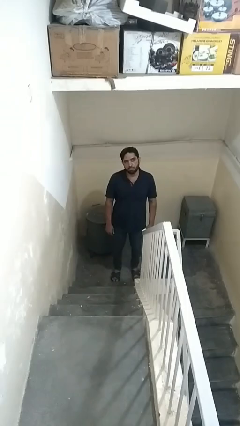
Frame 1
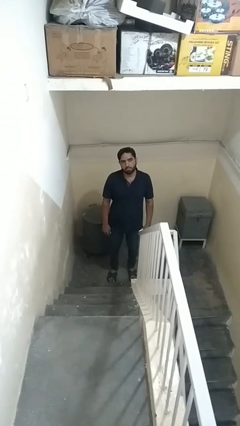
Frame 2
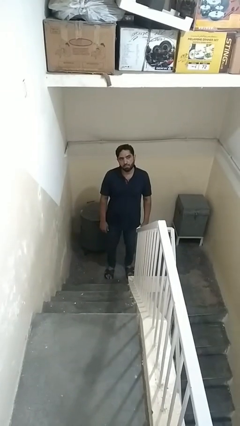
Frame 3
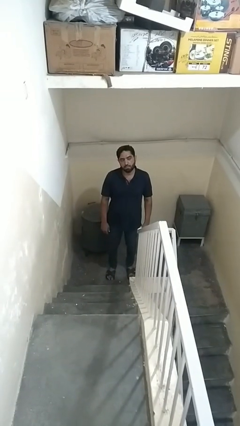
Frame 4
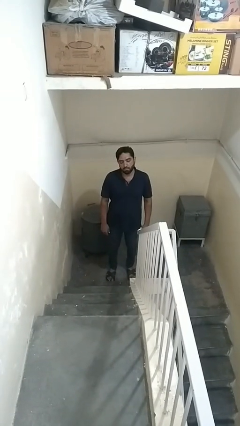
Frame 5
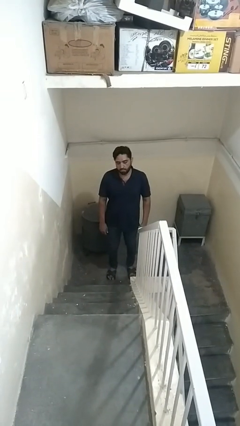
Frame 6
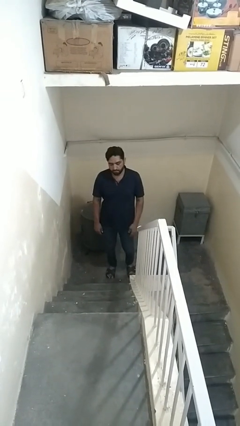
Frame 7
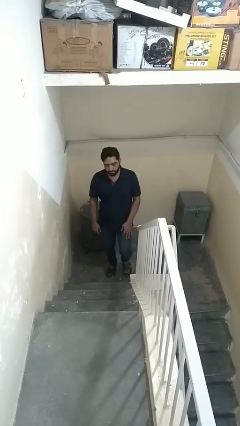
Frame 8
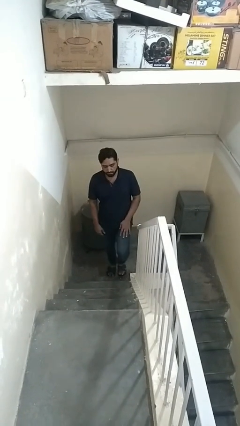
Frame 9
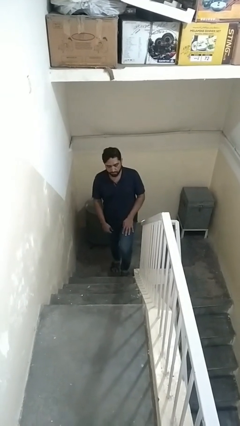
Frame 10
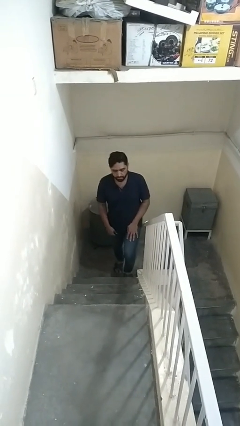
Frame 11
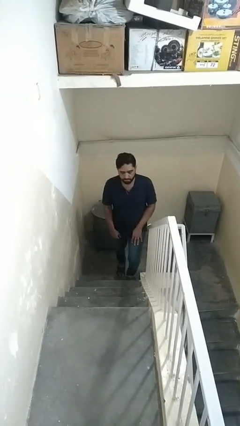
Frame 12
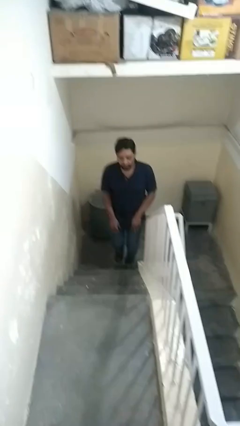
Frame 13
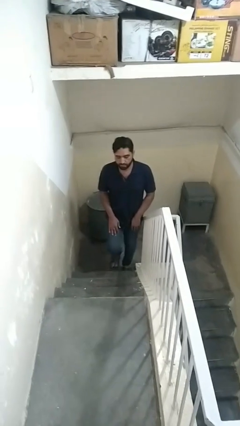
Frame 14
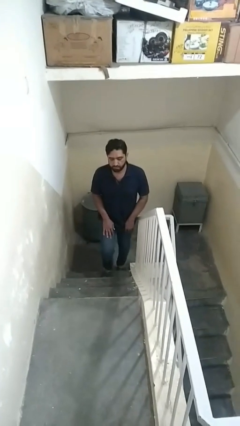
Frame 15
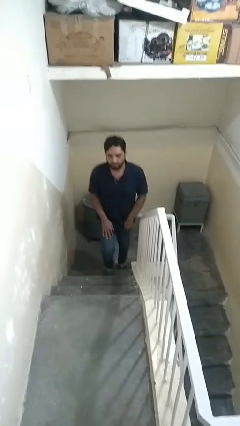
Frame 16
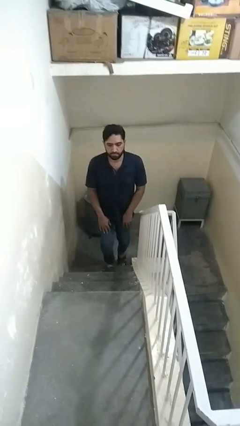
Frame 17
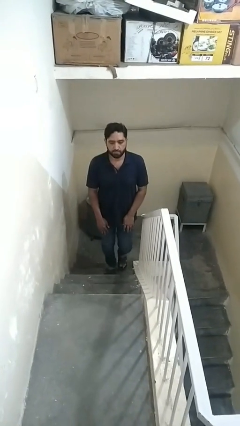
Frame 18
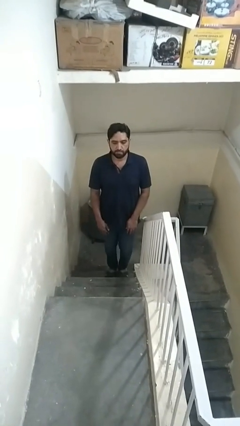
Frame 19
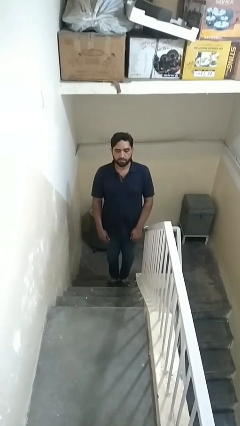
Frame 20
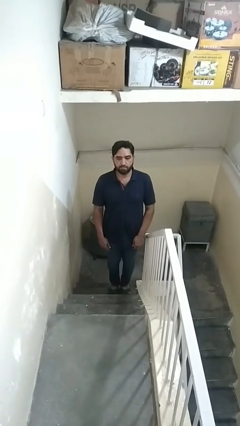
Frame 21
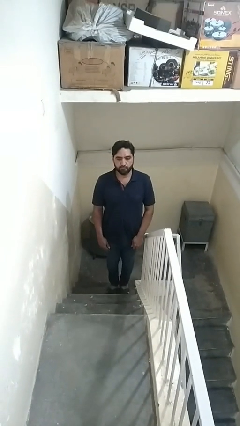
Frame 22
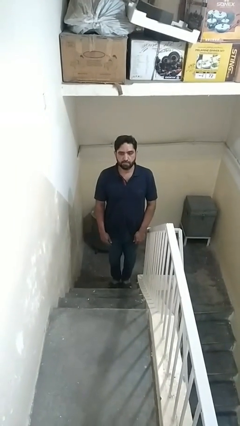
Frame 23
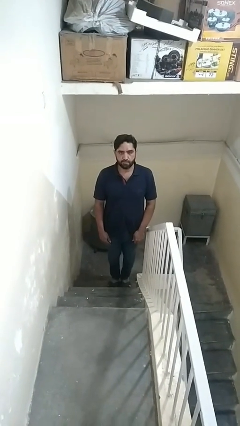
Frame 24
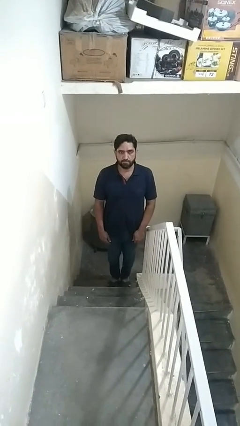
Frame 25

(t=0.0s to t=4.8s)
person climbs up stairs

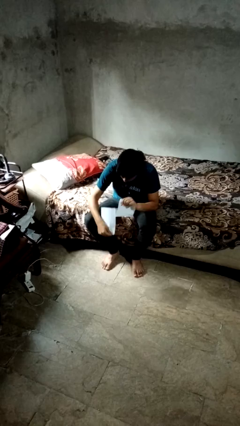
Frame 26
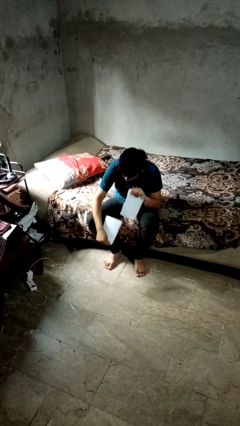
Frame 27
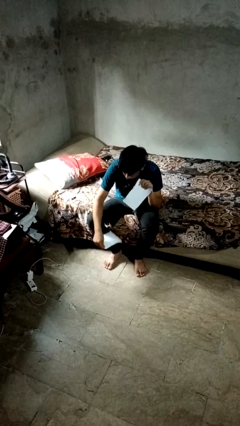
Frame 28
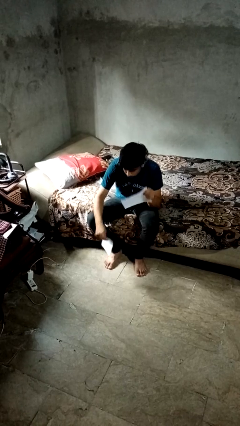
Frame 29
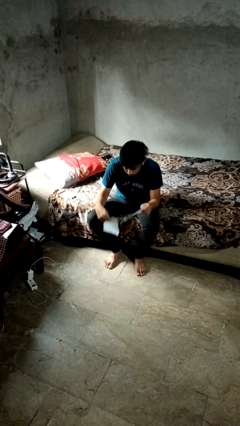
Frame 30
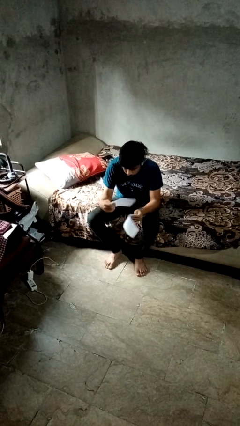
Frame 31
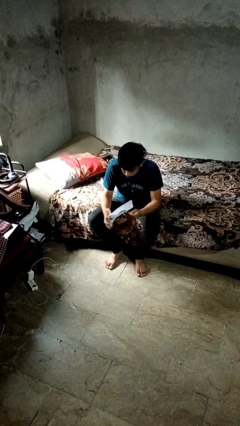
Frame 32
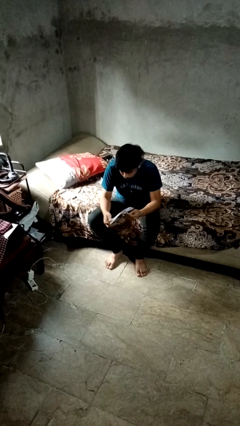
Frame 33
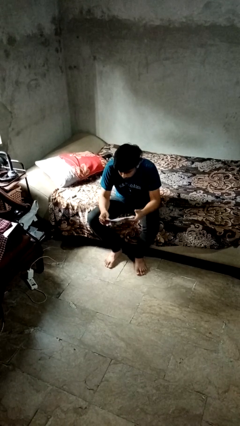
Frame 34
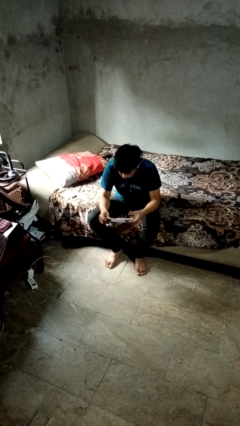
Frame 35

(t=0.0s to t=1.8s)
person tears paper

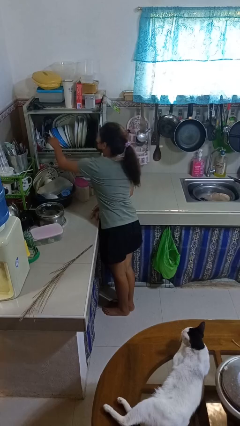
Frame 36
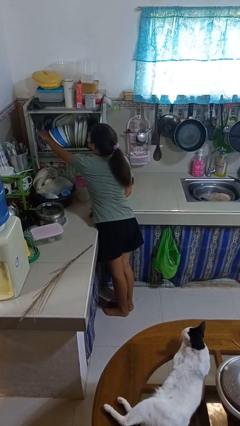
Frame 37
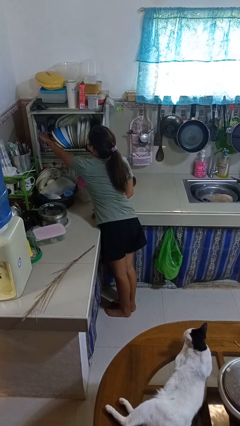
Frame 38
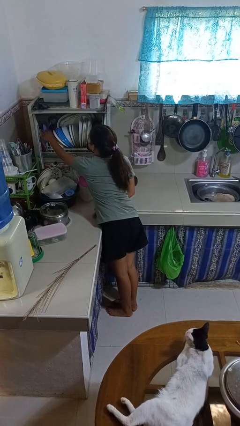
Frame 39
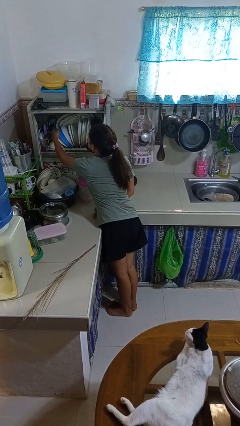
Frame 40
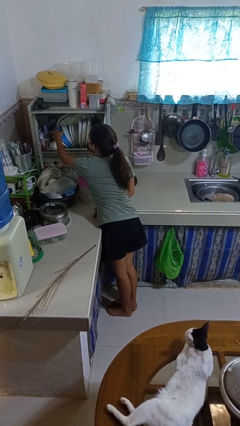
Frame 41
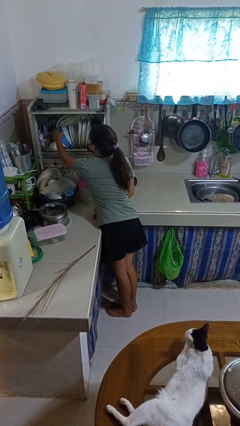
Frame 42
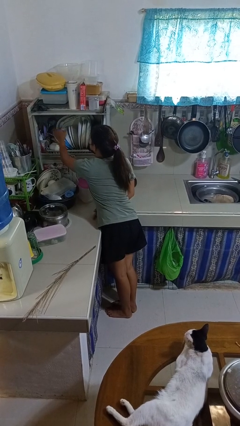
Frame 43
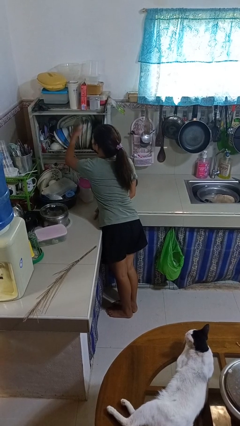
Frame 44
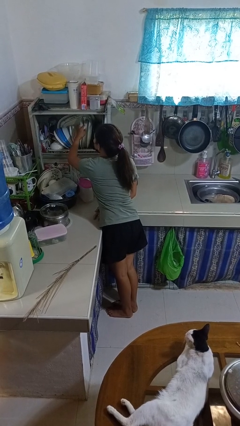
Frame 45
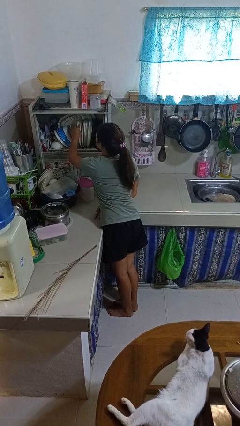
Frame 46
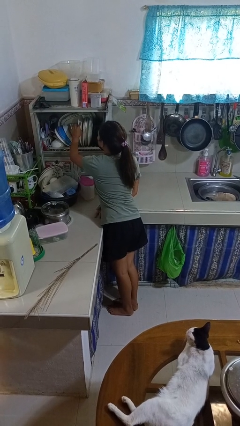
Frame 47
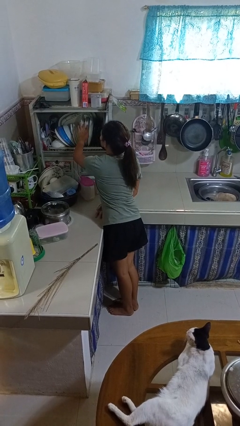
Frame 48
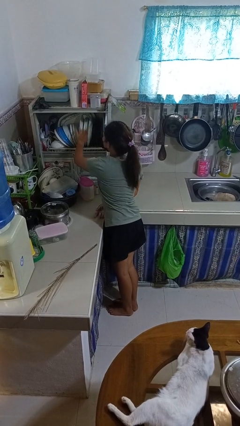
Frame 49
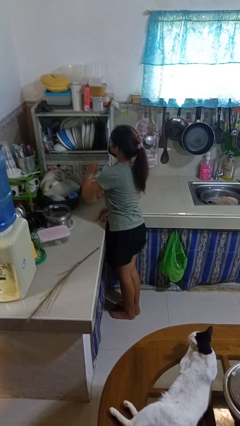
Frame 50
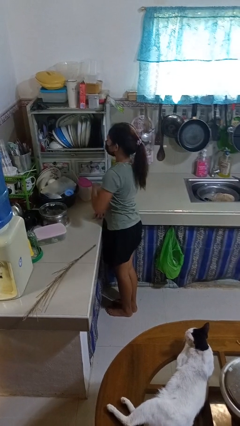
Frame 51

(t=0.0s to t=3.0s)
person searches in kitchen drawer

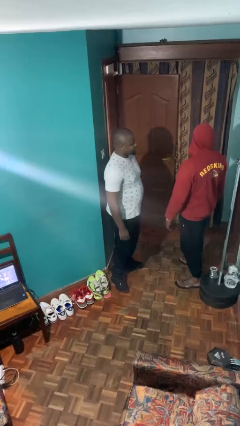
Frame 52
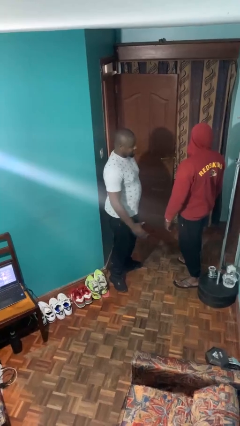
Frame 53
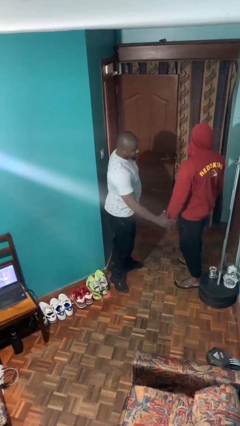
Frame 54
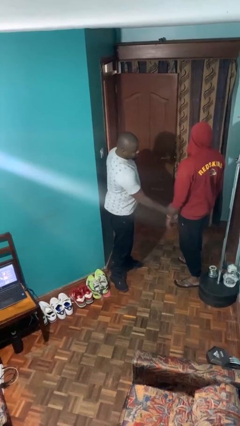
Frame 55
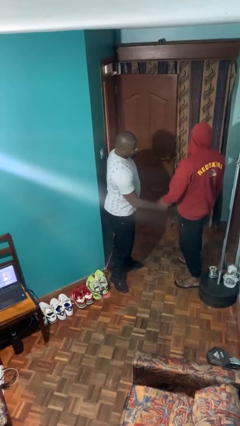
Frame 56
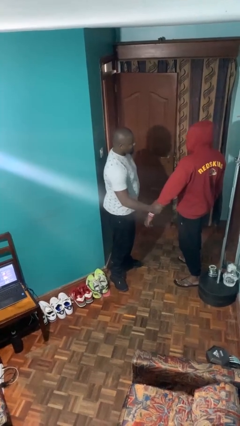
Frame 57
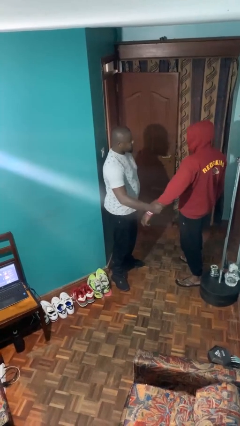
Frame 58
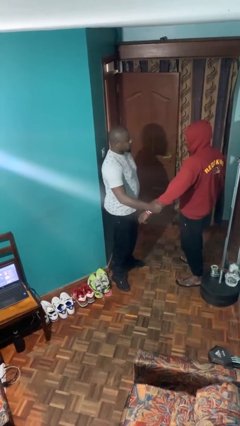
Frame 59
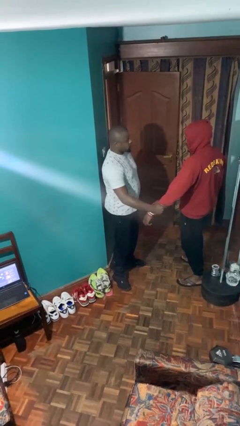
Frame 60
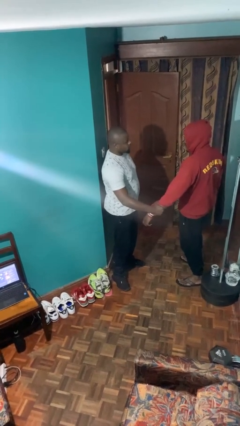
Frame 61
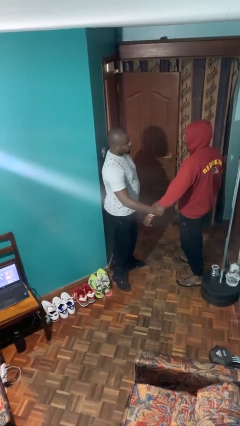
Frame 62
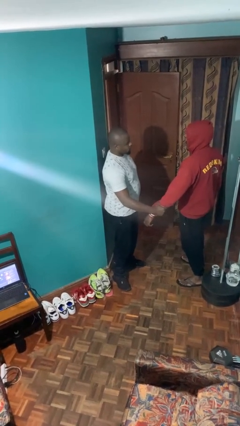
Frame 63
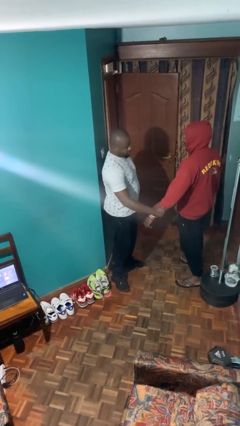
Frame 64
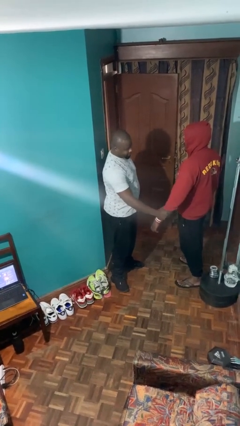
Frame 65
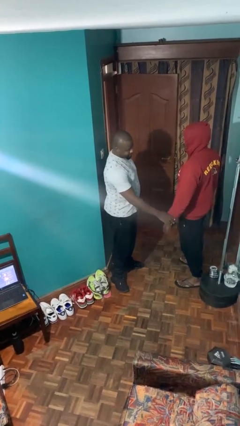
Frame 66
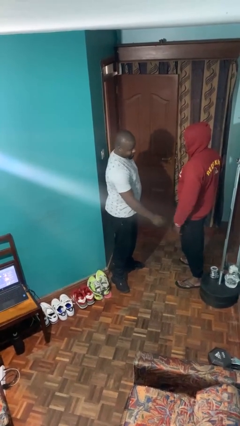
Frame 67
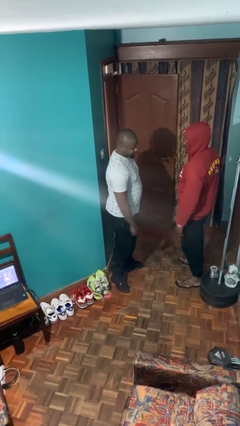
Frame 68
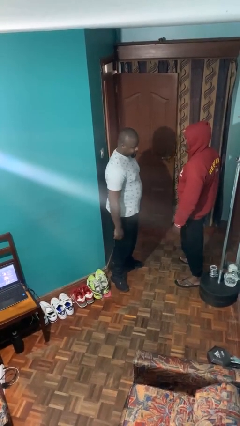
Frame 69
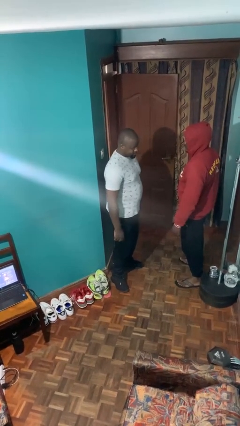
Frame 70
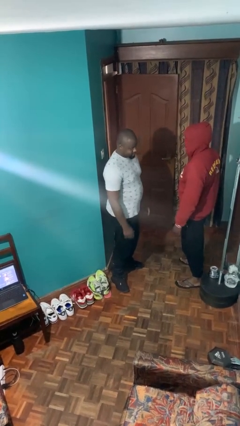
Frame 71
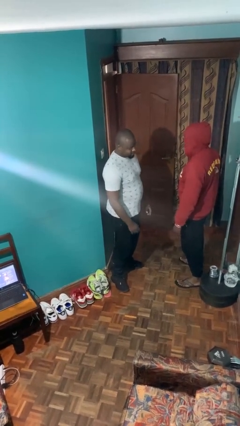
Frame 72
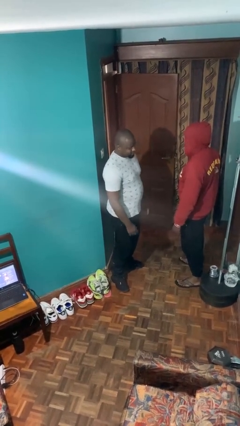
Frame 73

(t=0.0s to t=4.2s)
person grabs person by forearm

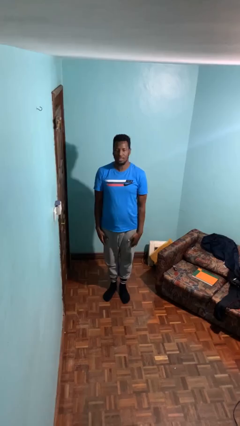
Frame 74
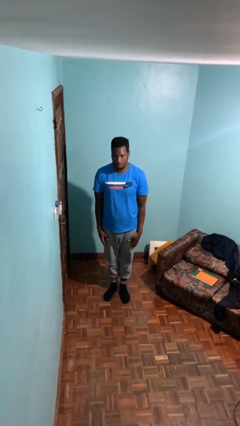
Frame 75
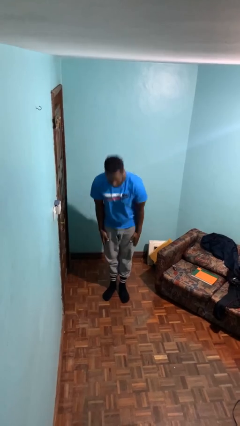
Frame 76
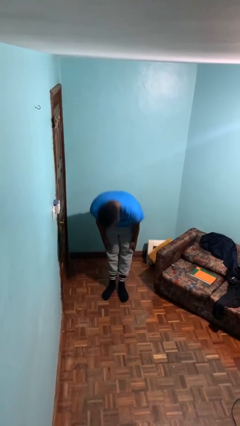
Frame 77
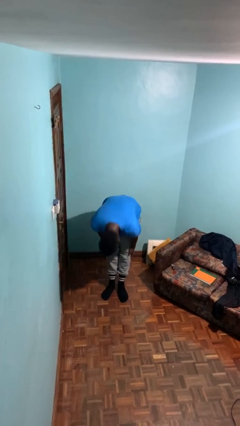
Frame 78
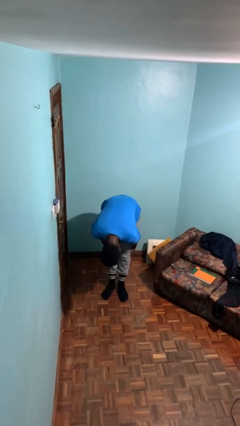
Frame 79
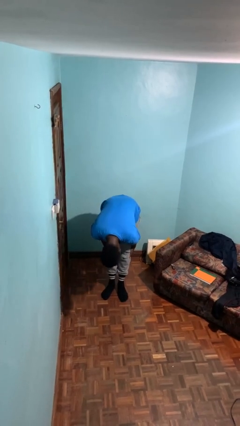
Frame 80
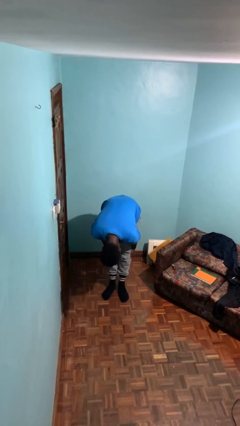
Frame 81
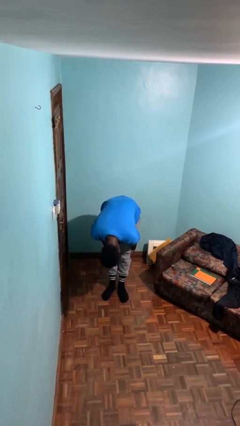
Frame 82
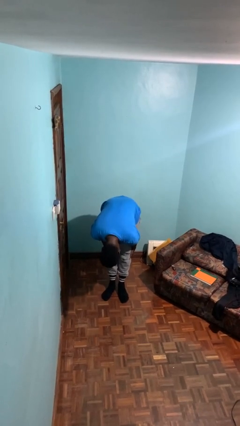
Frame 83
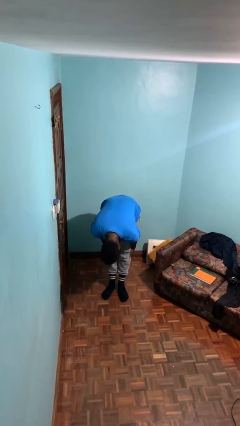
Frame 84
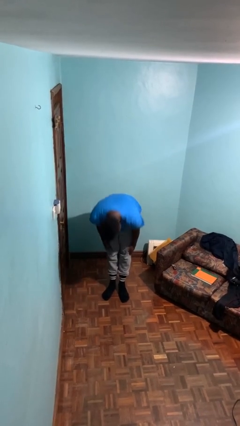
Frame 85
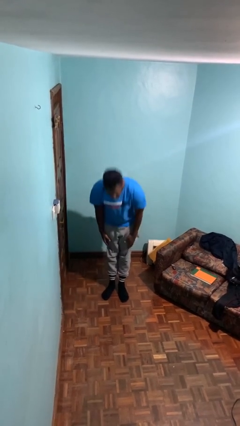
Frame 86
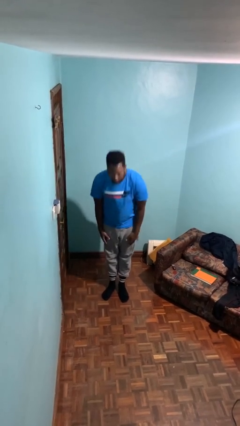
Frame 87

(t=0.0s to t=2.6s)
person bows

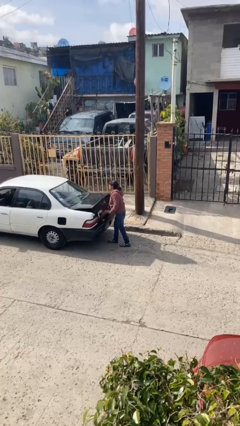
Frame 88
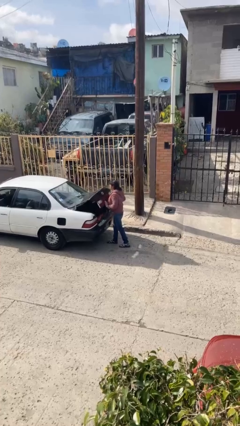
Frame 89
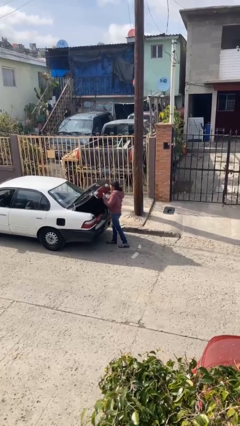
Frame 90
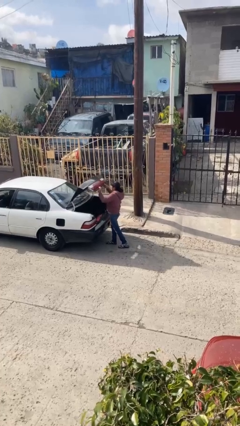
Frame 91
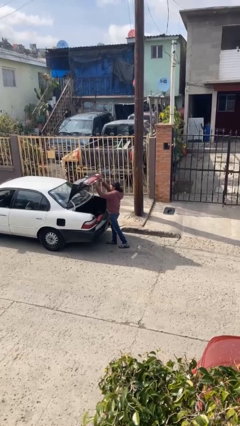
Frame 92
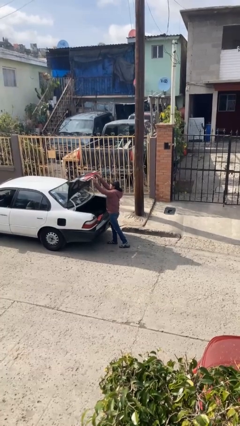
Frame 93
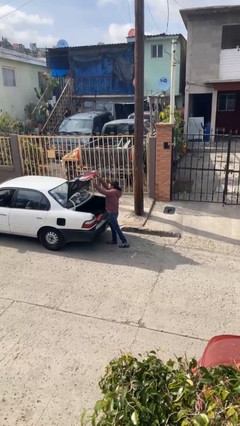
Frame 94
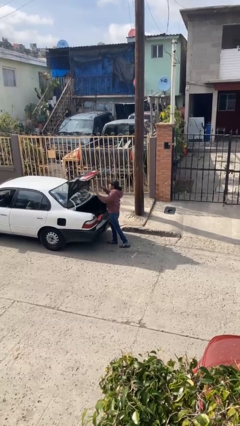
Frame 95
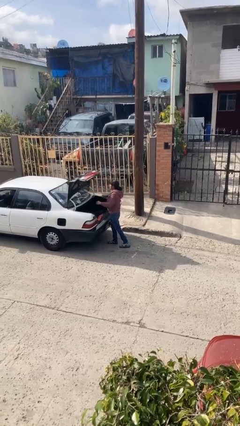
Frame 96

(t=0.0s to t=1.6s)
person opens car trunk
